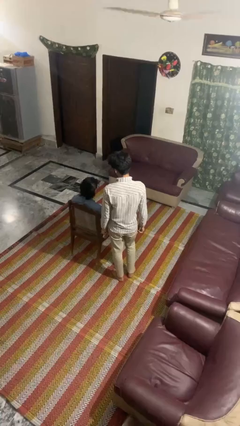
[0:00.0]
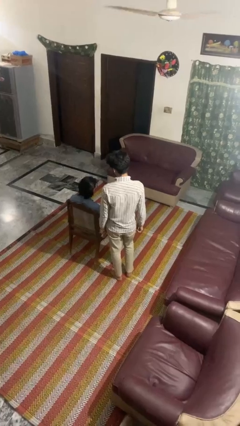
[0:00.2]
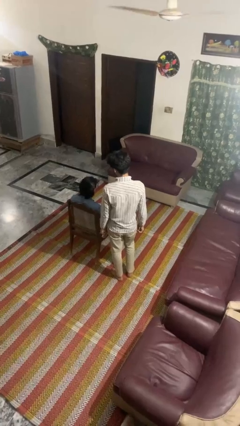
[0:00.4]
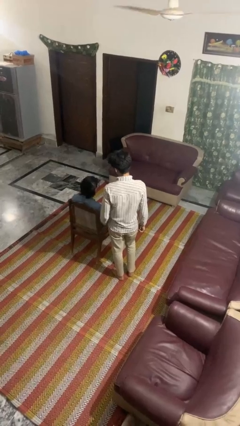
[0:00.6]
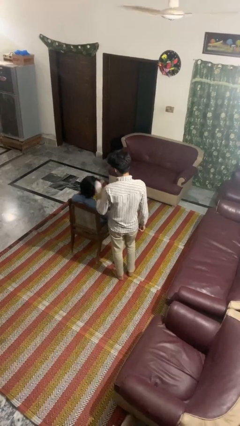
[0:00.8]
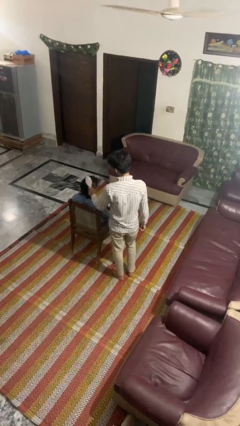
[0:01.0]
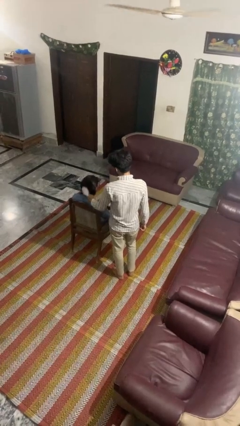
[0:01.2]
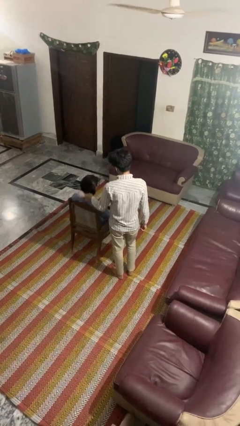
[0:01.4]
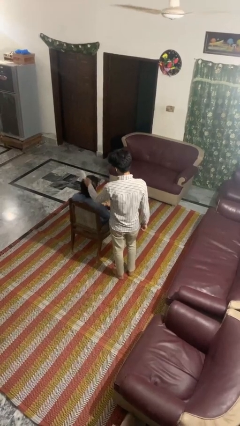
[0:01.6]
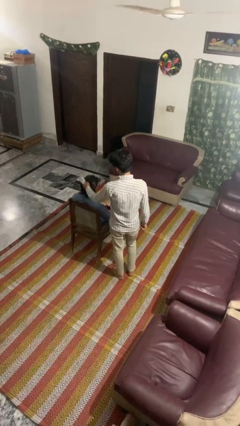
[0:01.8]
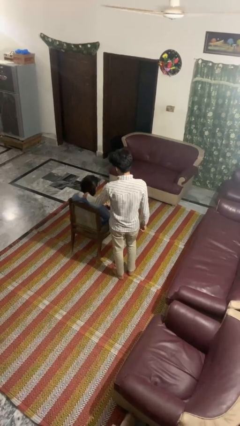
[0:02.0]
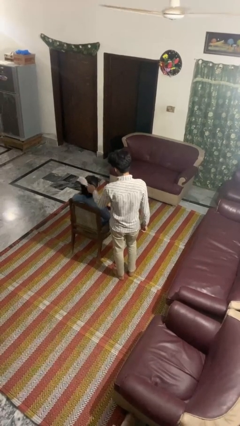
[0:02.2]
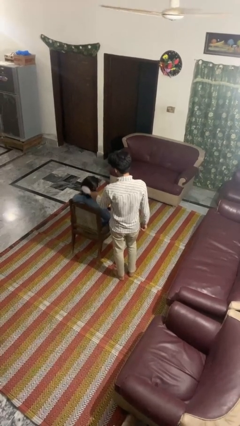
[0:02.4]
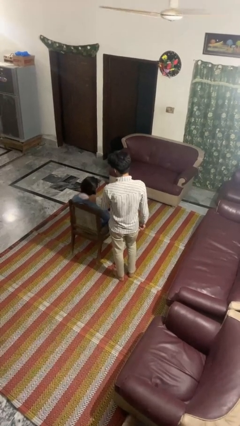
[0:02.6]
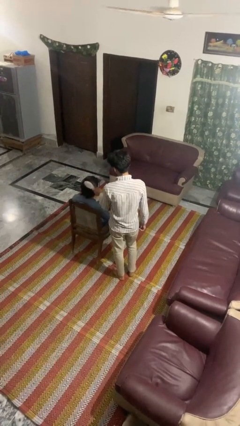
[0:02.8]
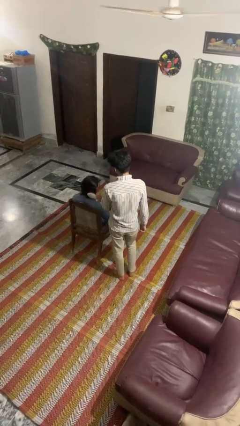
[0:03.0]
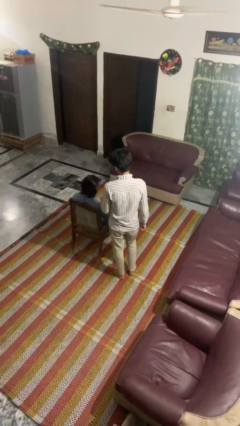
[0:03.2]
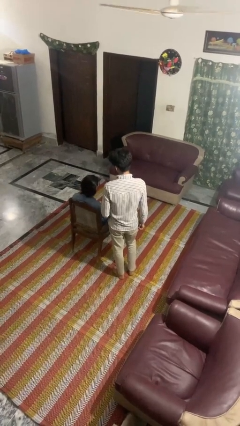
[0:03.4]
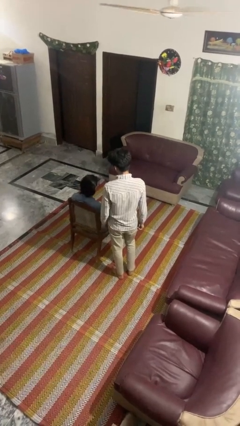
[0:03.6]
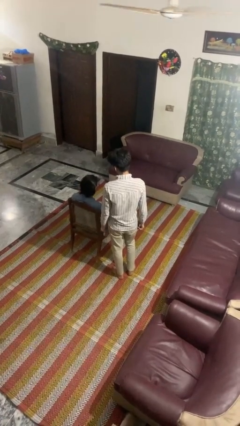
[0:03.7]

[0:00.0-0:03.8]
person brushes hair of person

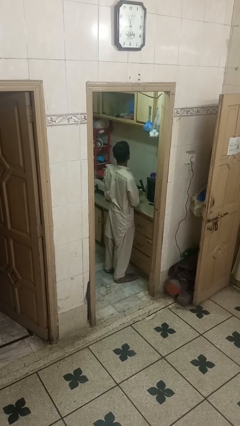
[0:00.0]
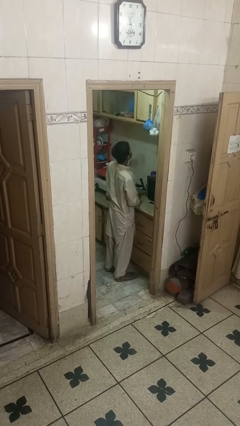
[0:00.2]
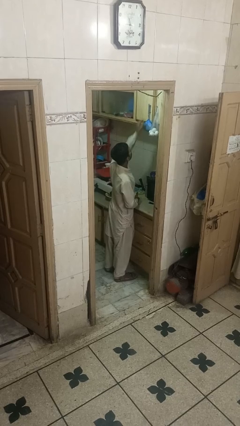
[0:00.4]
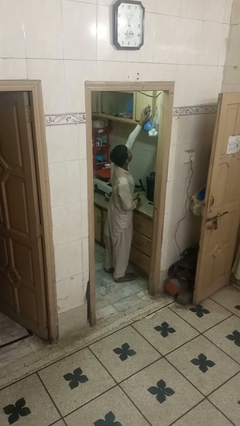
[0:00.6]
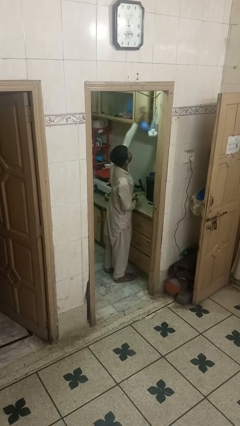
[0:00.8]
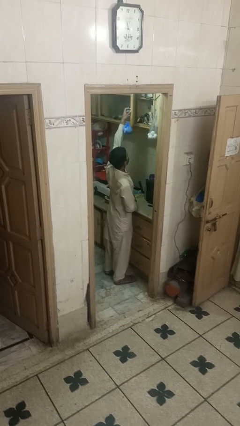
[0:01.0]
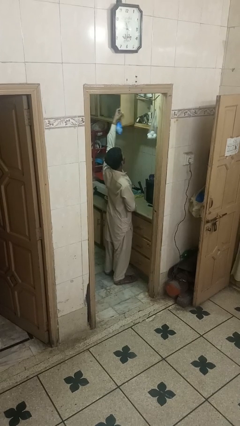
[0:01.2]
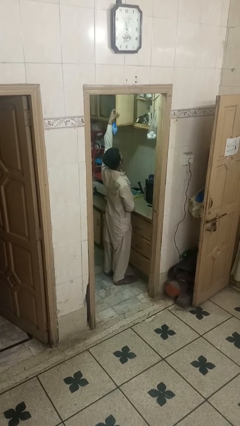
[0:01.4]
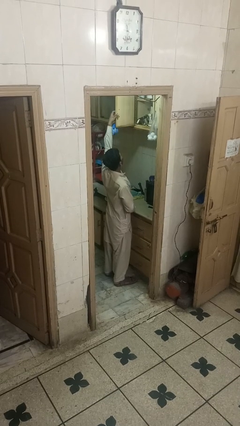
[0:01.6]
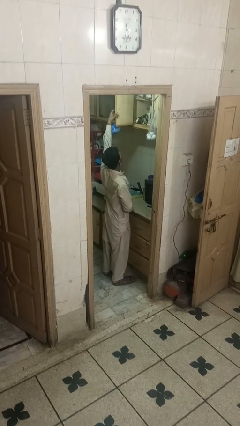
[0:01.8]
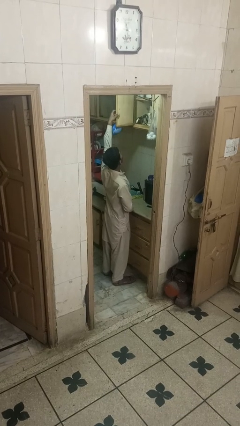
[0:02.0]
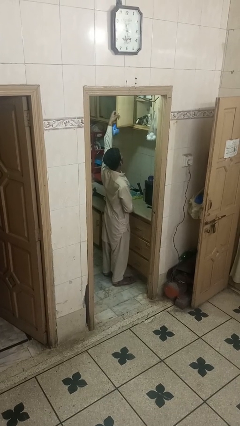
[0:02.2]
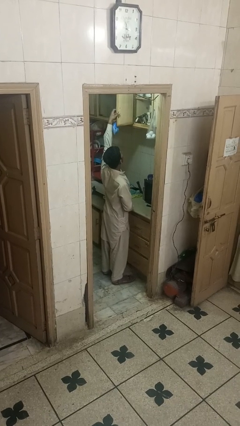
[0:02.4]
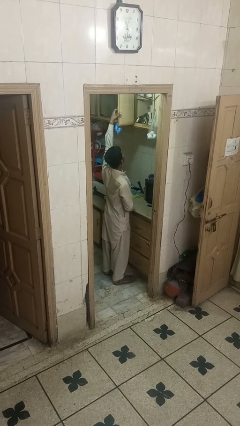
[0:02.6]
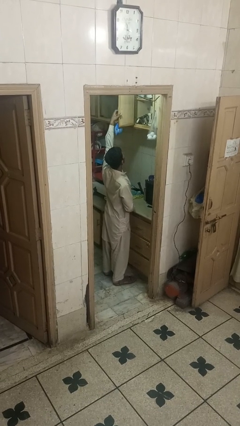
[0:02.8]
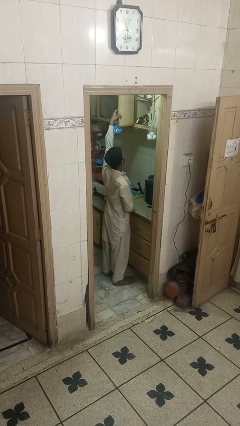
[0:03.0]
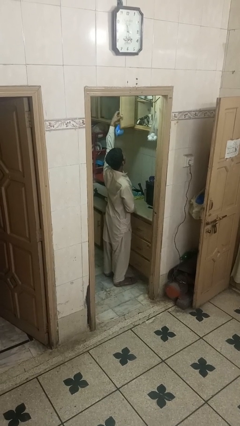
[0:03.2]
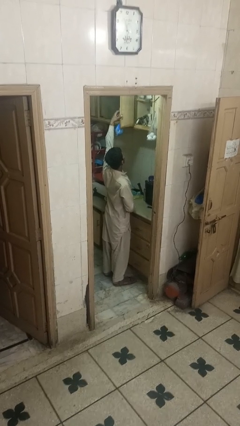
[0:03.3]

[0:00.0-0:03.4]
person opens cabinet

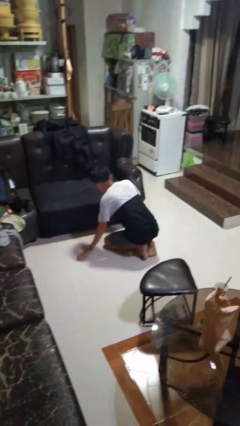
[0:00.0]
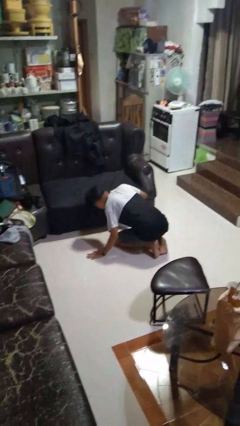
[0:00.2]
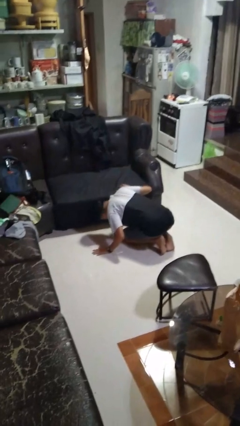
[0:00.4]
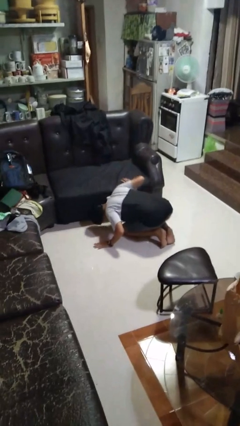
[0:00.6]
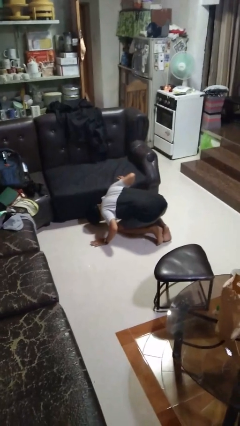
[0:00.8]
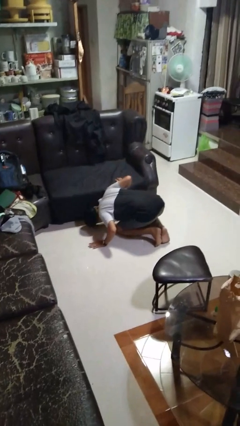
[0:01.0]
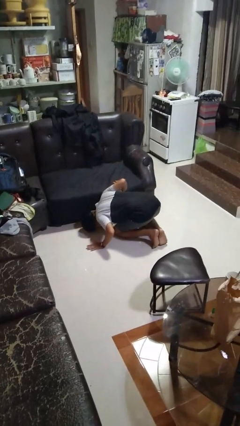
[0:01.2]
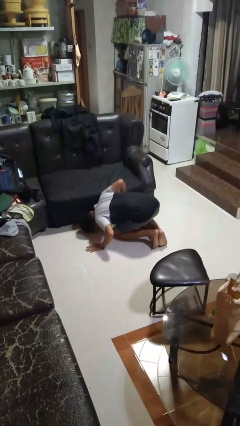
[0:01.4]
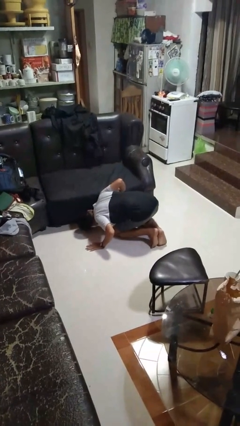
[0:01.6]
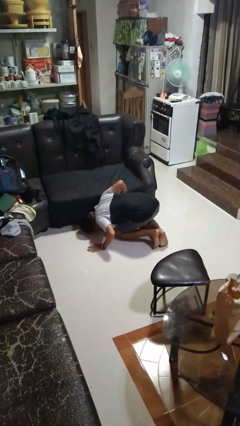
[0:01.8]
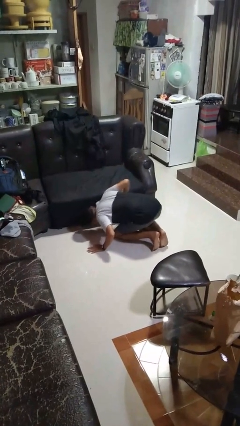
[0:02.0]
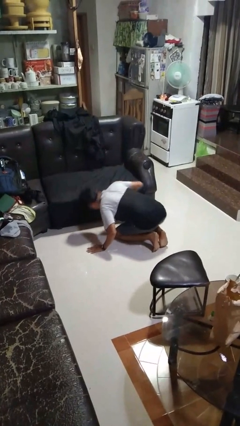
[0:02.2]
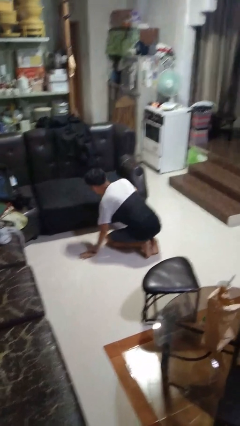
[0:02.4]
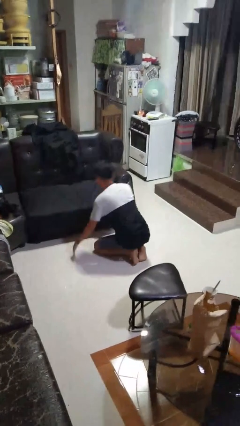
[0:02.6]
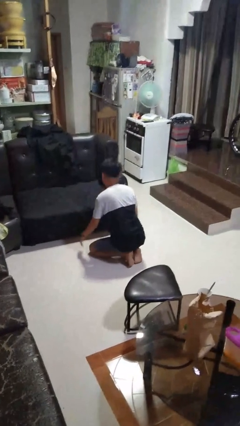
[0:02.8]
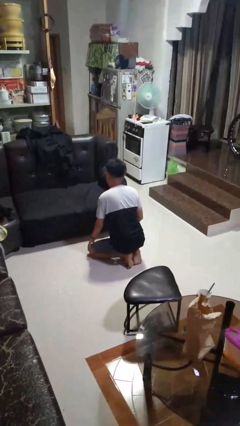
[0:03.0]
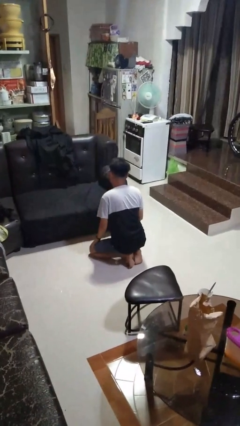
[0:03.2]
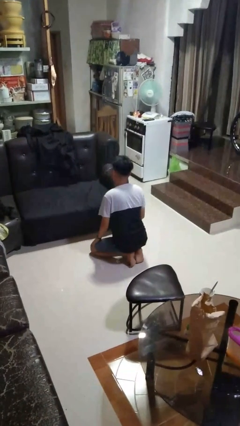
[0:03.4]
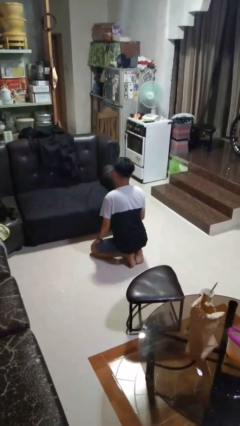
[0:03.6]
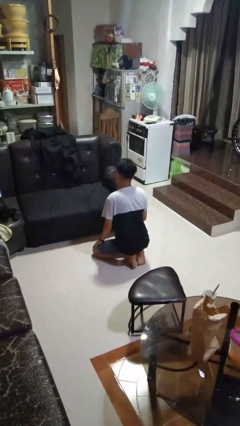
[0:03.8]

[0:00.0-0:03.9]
person searches under couch

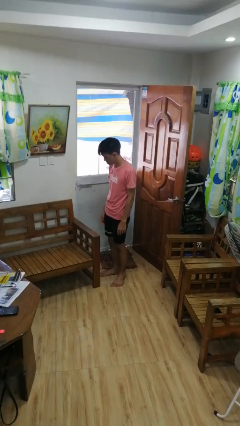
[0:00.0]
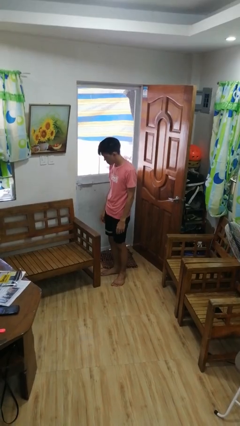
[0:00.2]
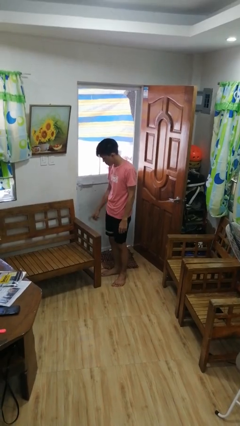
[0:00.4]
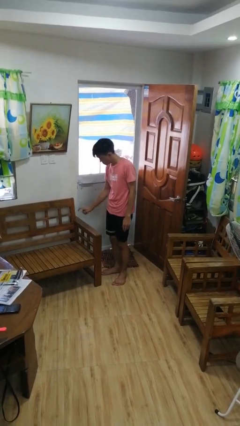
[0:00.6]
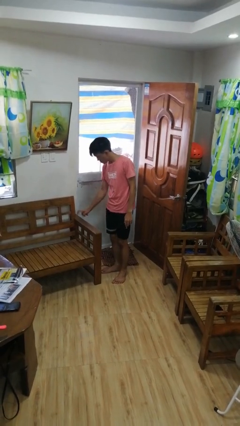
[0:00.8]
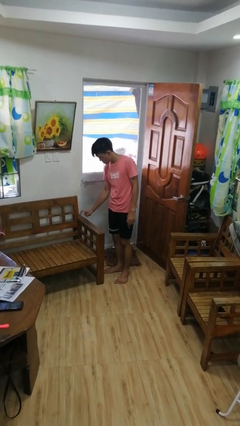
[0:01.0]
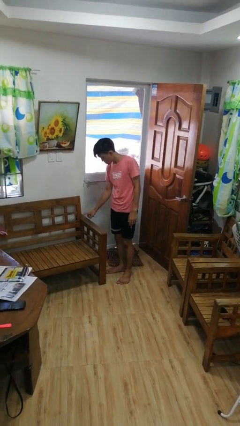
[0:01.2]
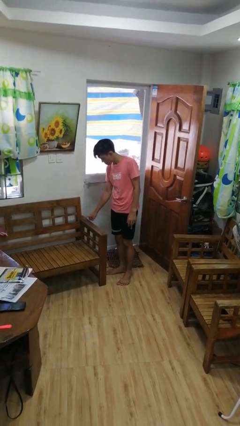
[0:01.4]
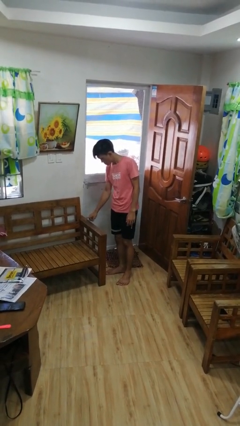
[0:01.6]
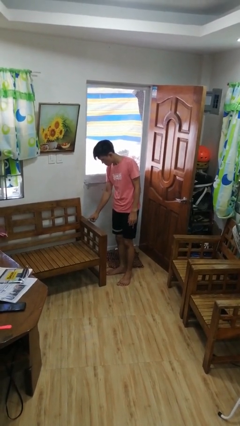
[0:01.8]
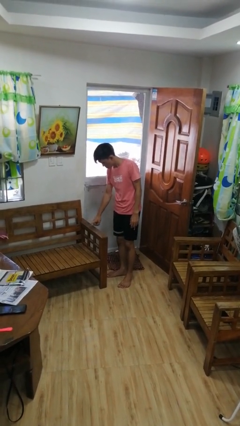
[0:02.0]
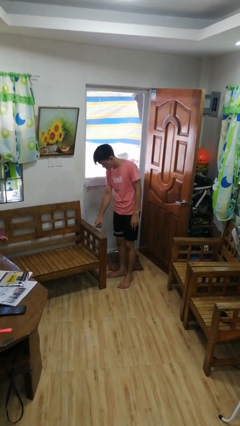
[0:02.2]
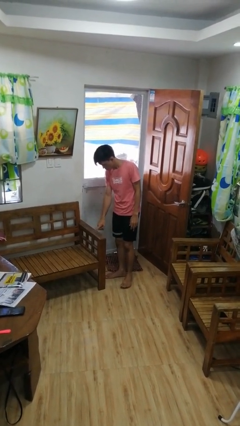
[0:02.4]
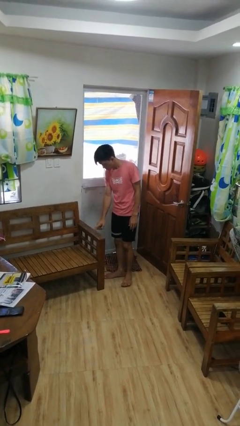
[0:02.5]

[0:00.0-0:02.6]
person taps object with finger

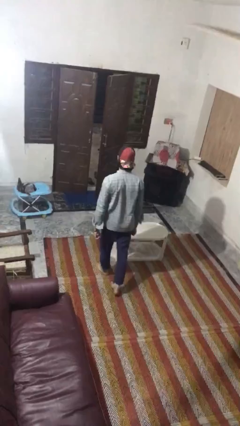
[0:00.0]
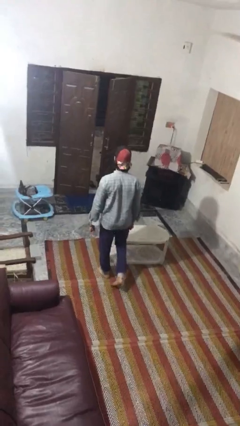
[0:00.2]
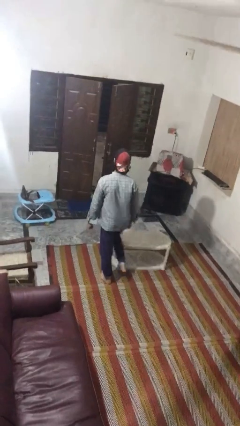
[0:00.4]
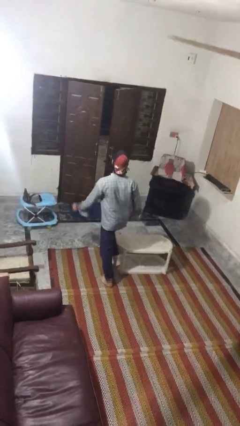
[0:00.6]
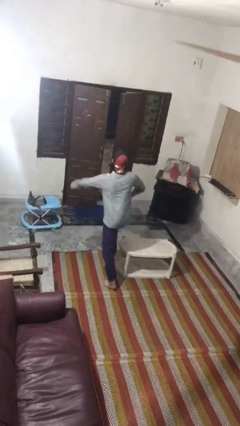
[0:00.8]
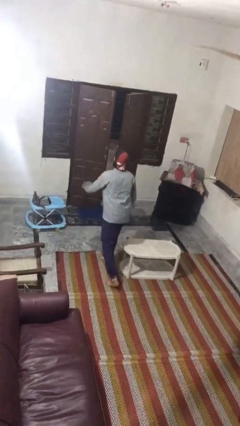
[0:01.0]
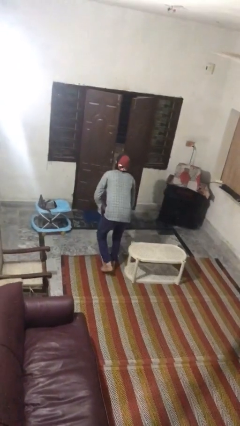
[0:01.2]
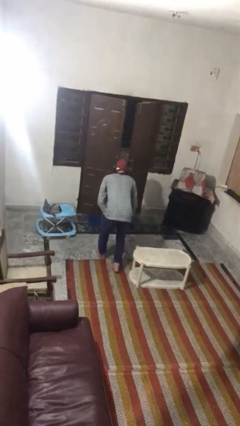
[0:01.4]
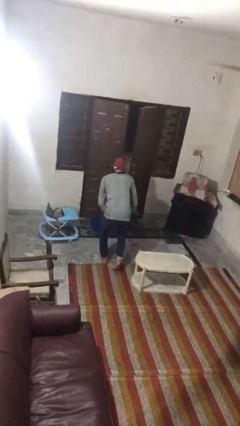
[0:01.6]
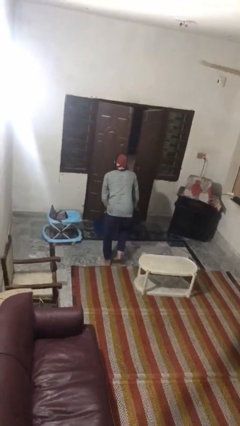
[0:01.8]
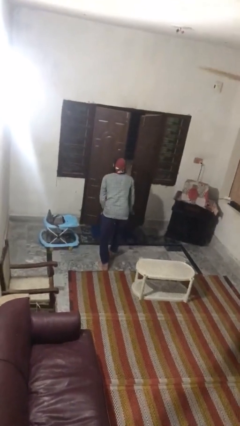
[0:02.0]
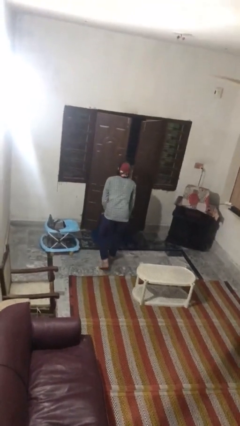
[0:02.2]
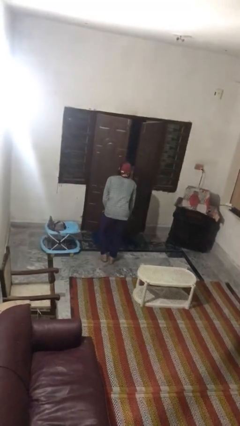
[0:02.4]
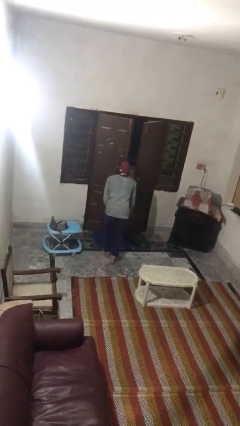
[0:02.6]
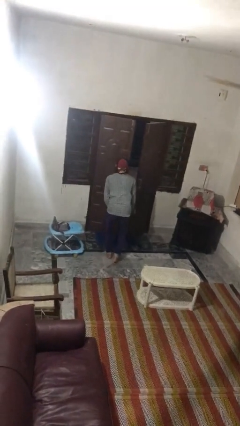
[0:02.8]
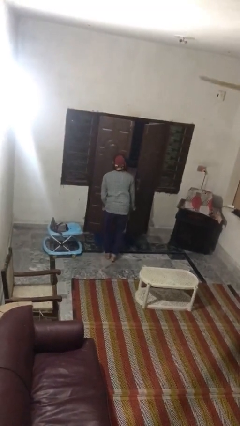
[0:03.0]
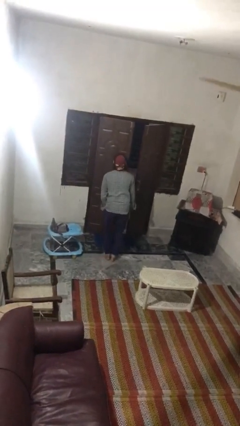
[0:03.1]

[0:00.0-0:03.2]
person bumps into table

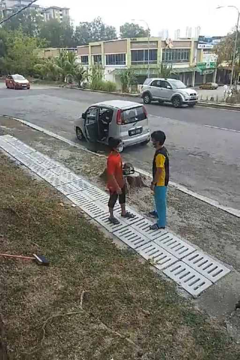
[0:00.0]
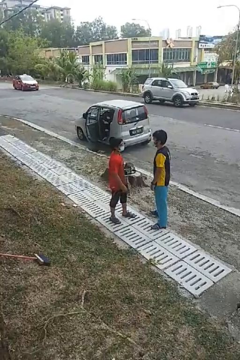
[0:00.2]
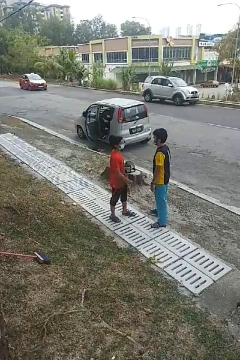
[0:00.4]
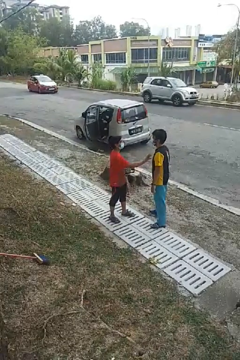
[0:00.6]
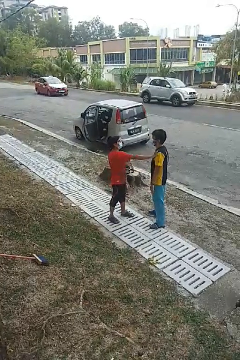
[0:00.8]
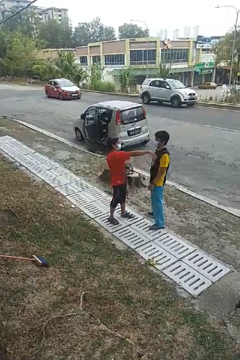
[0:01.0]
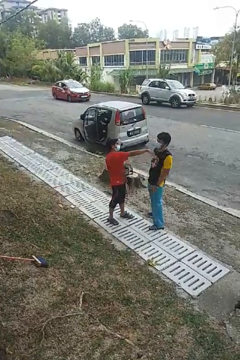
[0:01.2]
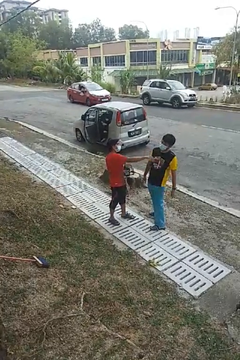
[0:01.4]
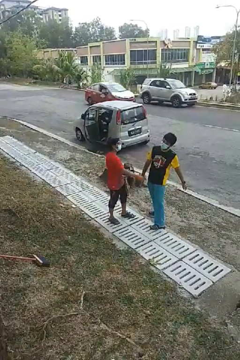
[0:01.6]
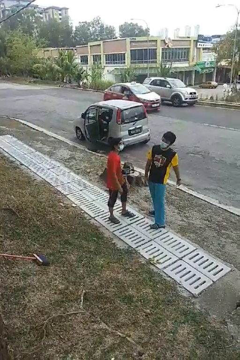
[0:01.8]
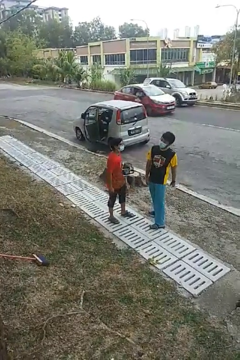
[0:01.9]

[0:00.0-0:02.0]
person shoves person
